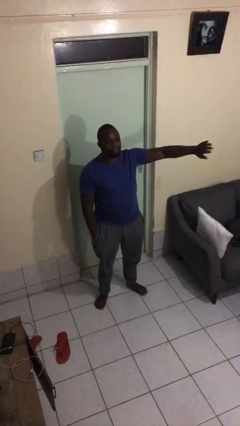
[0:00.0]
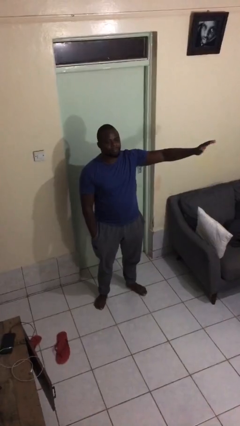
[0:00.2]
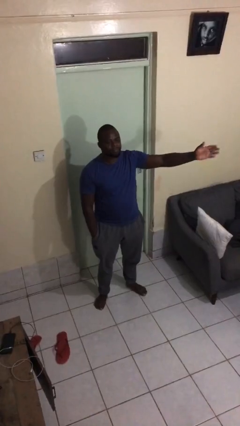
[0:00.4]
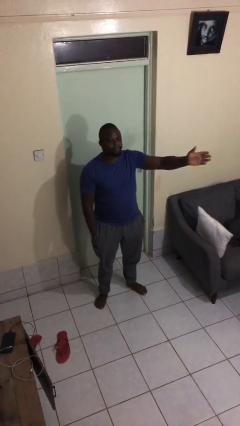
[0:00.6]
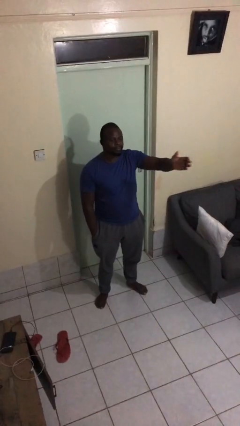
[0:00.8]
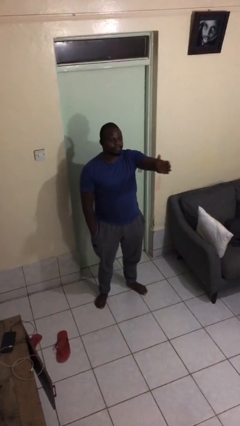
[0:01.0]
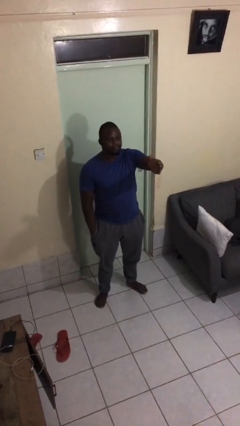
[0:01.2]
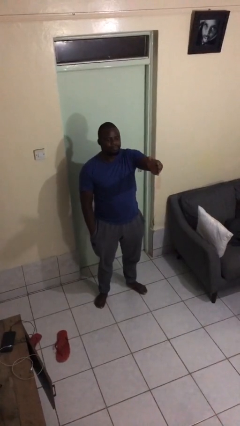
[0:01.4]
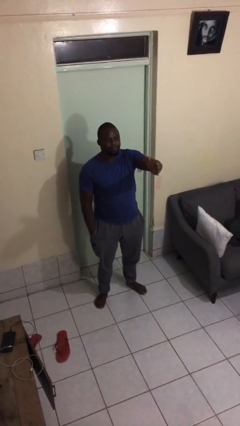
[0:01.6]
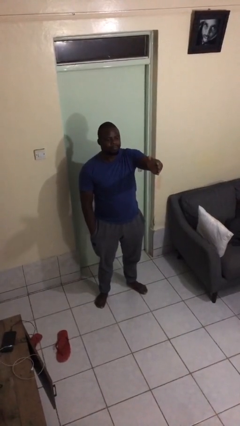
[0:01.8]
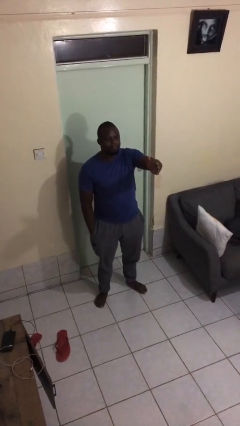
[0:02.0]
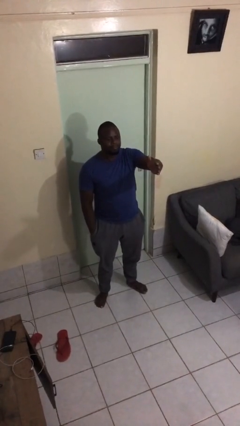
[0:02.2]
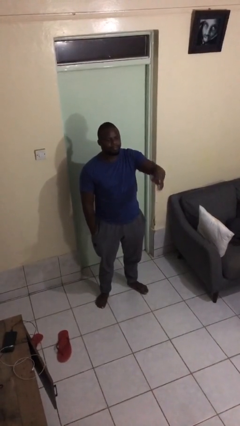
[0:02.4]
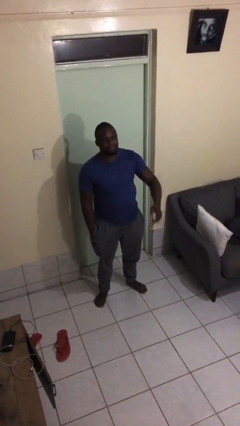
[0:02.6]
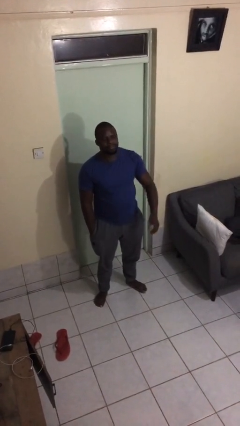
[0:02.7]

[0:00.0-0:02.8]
person gestures swipe right

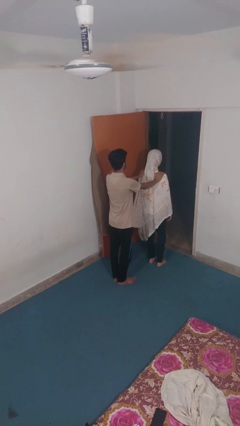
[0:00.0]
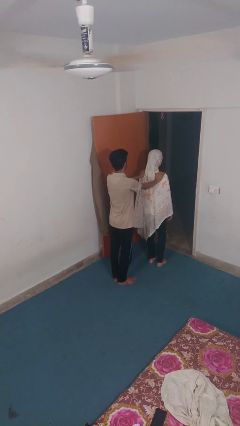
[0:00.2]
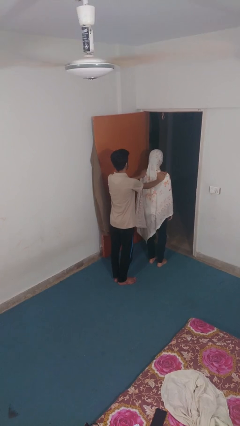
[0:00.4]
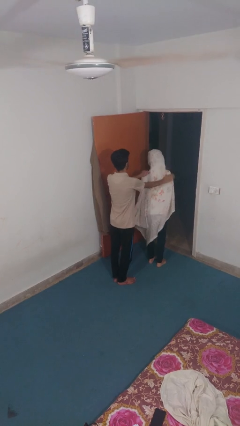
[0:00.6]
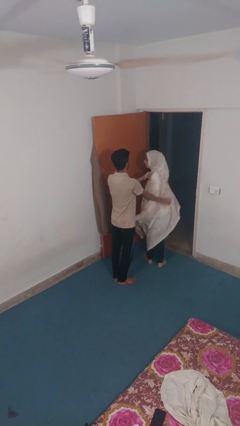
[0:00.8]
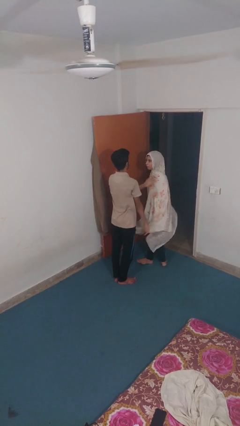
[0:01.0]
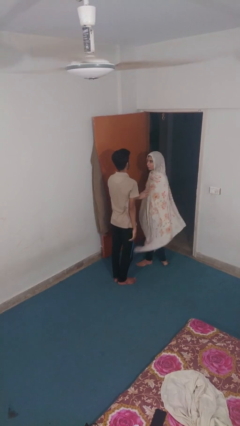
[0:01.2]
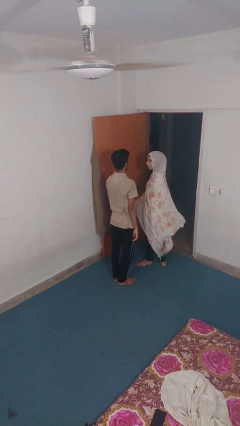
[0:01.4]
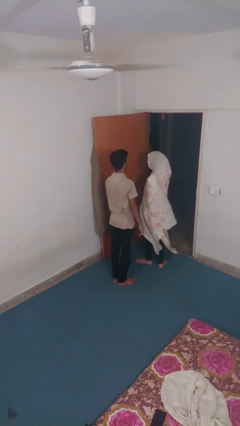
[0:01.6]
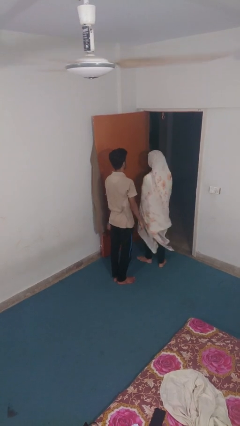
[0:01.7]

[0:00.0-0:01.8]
person spins person around

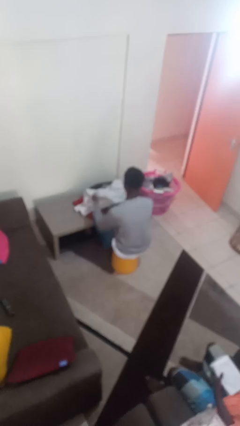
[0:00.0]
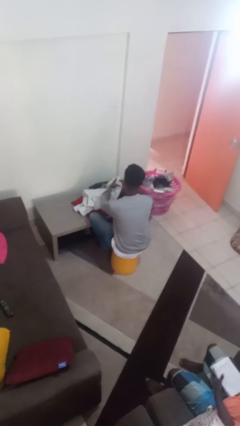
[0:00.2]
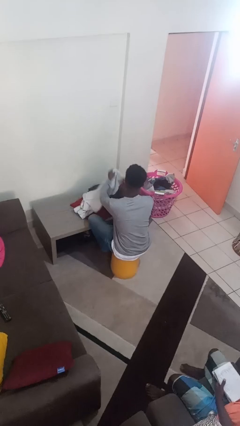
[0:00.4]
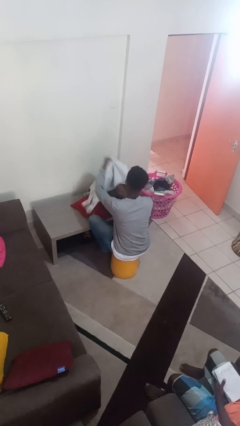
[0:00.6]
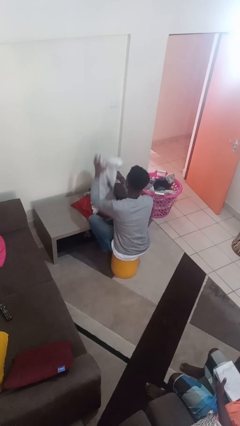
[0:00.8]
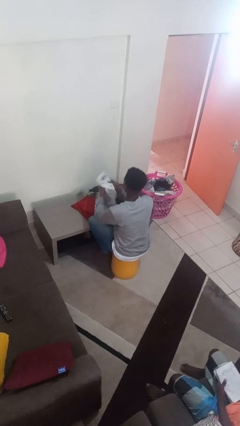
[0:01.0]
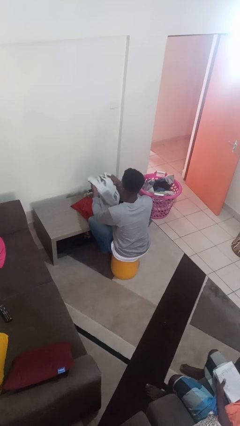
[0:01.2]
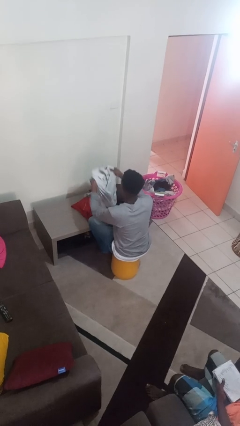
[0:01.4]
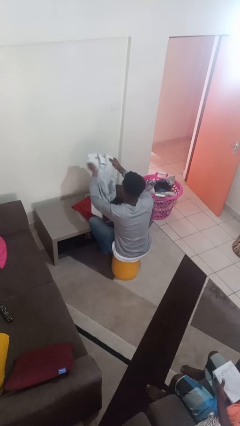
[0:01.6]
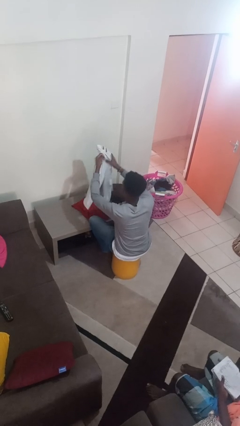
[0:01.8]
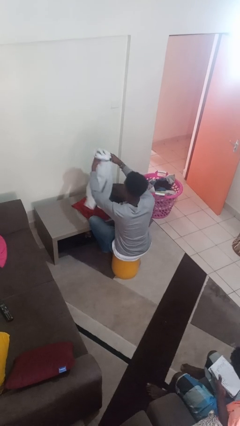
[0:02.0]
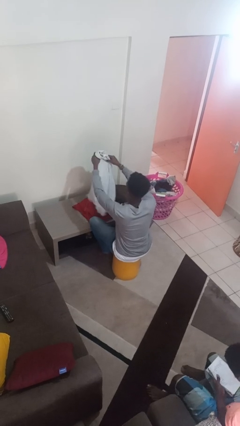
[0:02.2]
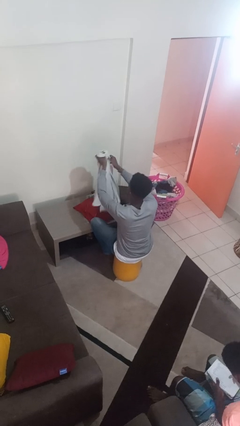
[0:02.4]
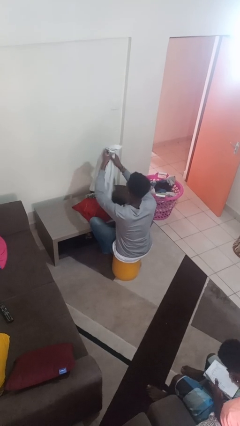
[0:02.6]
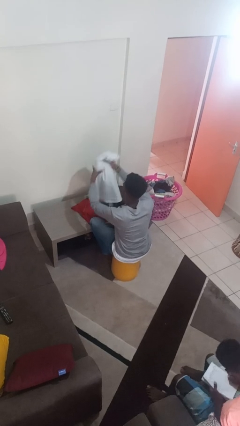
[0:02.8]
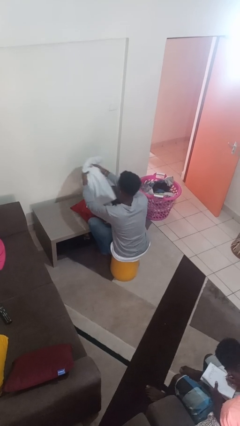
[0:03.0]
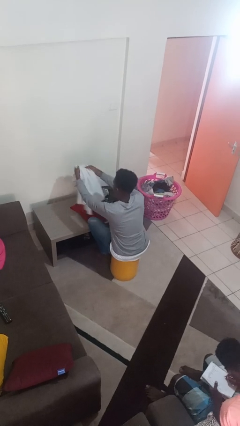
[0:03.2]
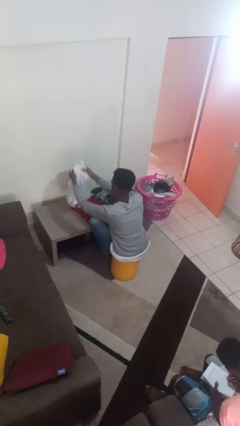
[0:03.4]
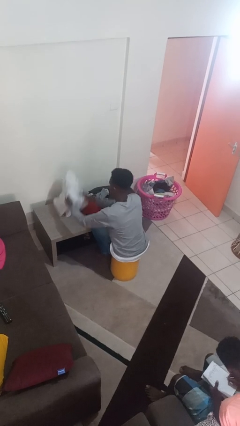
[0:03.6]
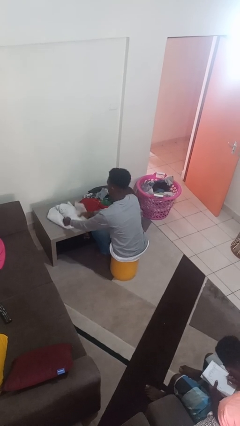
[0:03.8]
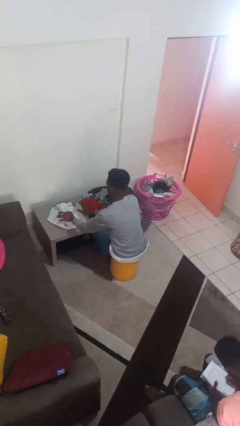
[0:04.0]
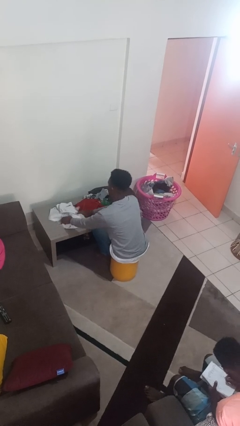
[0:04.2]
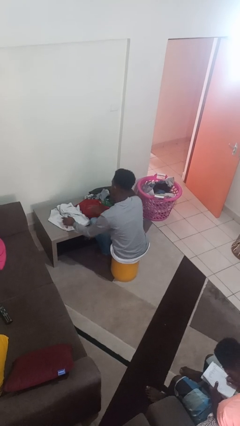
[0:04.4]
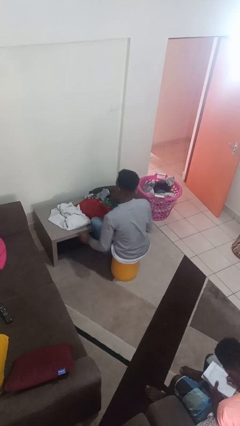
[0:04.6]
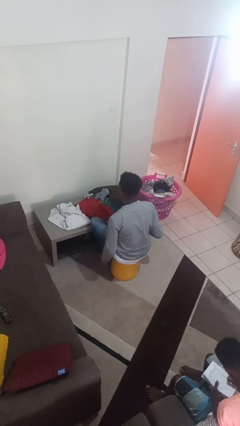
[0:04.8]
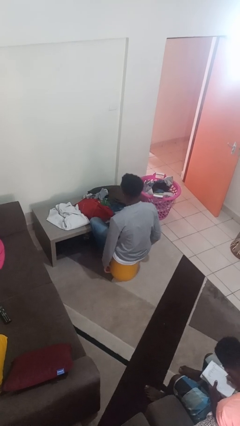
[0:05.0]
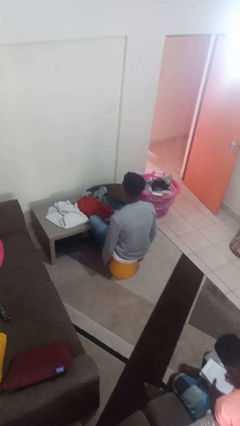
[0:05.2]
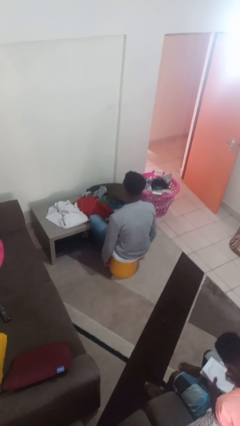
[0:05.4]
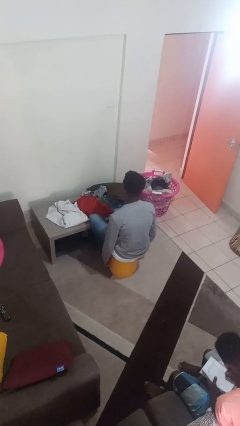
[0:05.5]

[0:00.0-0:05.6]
person folds shirt

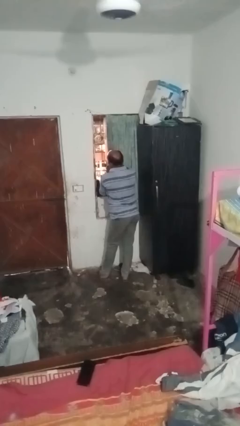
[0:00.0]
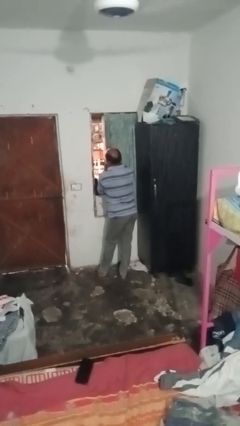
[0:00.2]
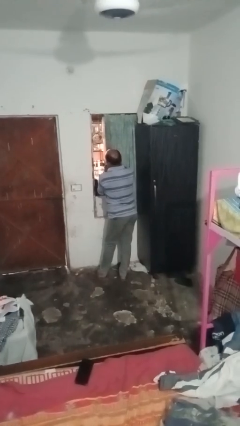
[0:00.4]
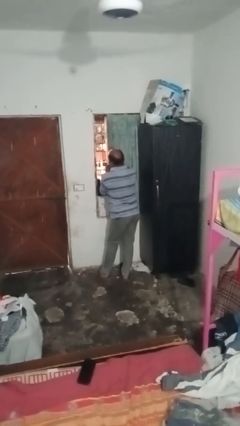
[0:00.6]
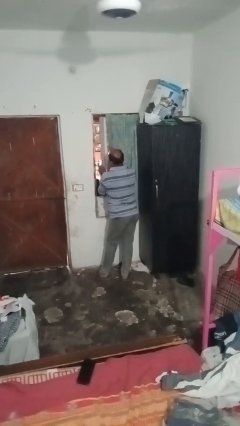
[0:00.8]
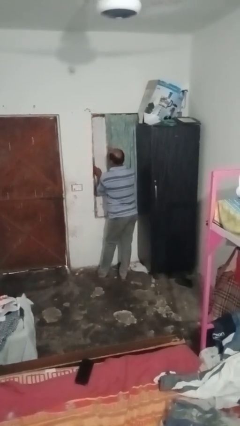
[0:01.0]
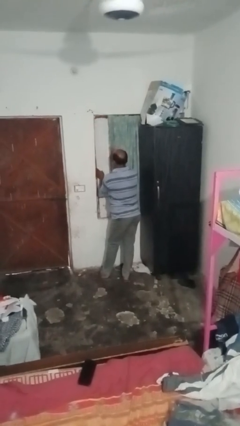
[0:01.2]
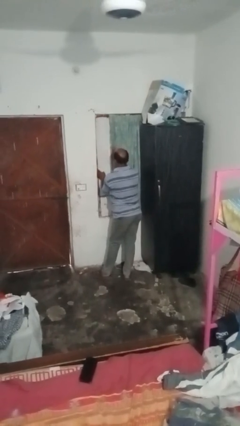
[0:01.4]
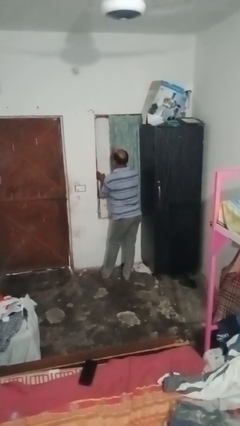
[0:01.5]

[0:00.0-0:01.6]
person closes home window

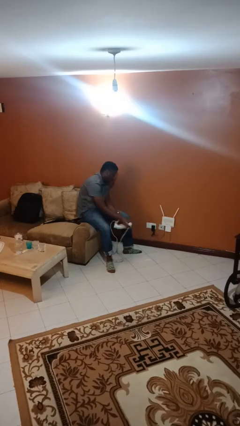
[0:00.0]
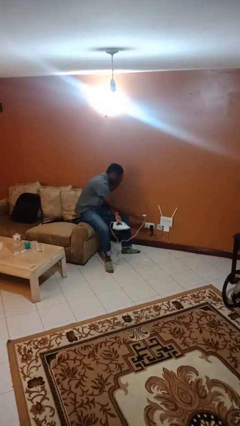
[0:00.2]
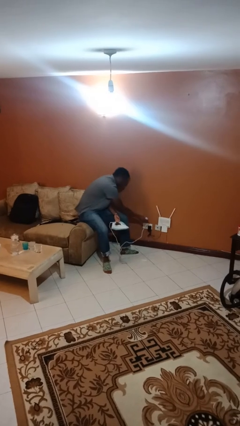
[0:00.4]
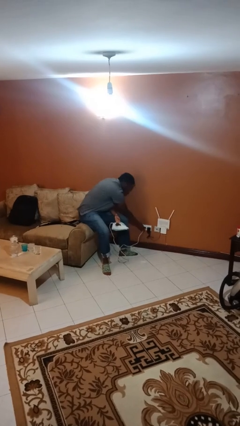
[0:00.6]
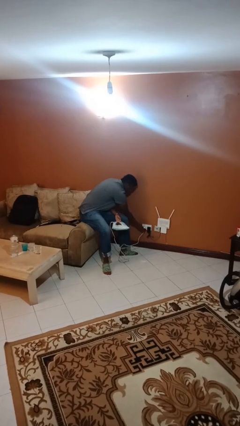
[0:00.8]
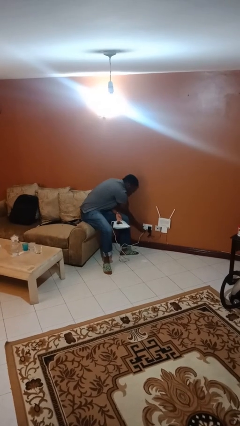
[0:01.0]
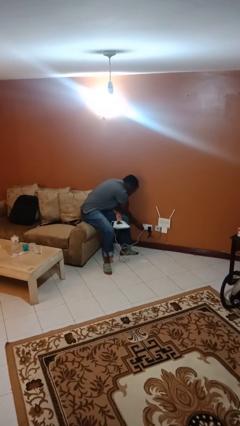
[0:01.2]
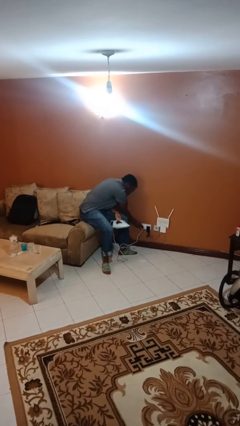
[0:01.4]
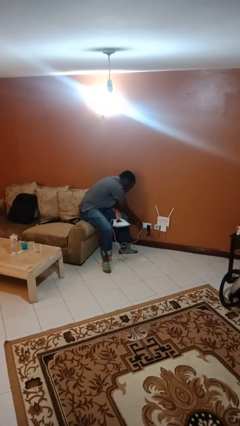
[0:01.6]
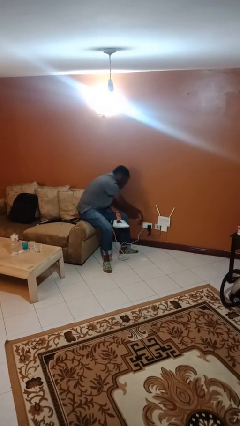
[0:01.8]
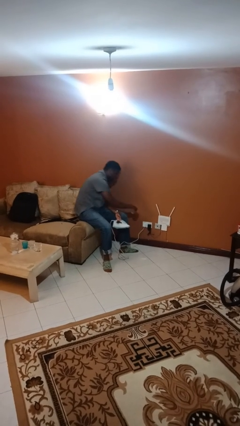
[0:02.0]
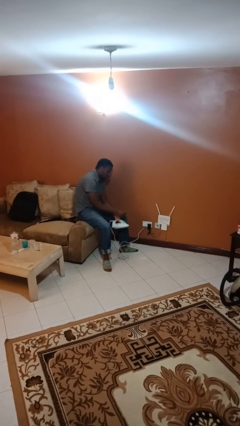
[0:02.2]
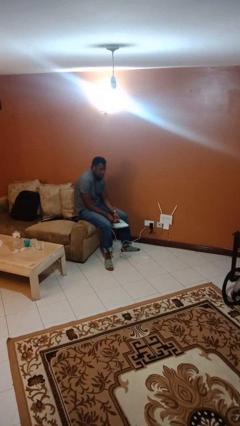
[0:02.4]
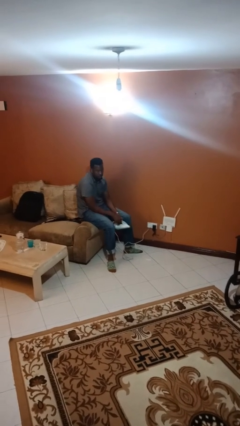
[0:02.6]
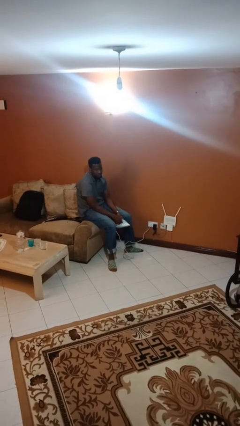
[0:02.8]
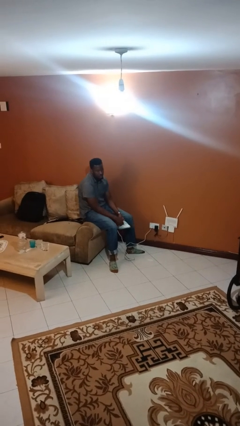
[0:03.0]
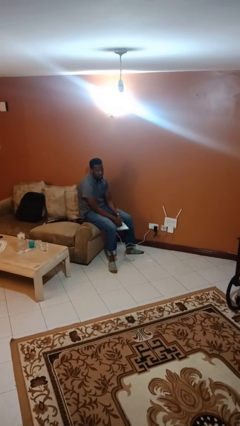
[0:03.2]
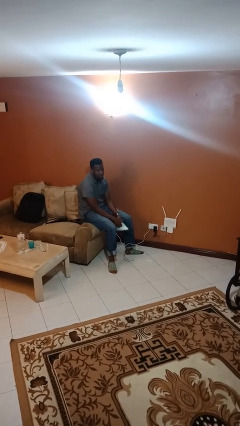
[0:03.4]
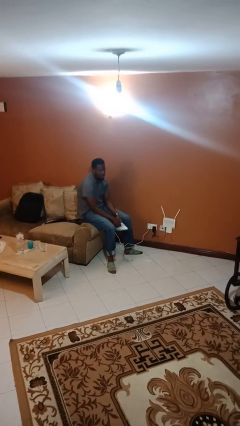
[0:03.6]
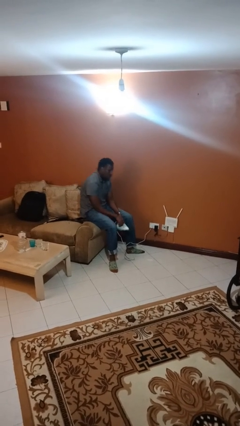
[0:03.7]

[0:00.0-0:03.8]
person plugs into electrical socket

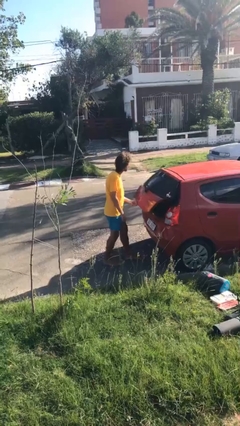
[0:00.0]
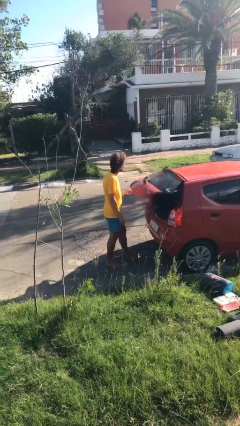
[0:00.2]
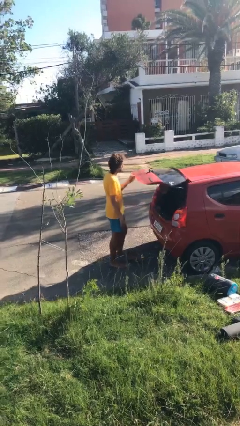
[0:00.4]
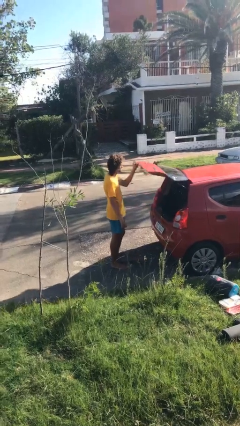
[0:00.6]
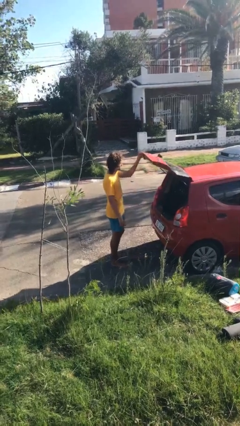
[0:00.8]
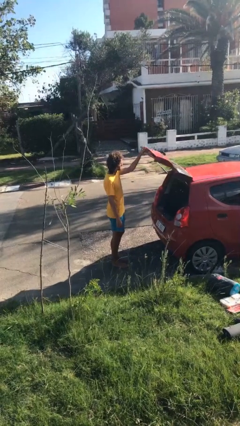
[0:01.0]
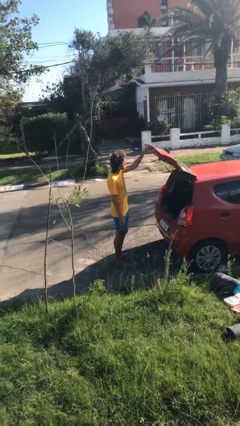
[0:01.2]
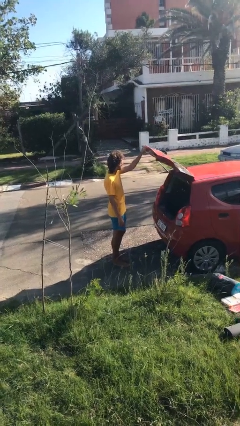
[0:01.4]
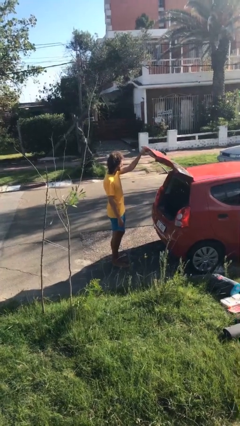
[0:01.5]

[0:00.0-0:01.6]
person opens car trunk

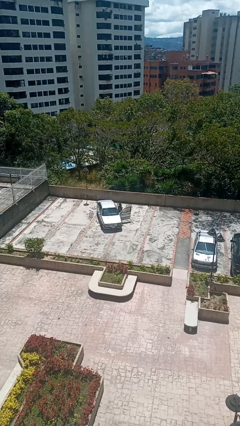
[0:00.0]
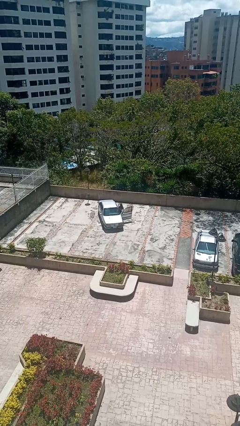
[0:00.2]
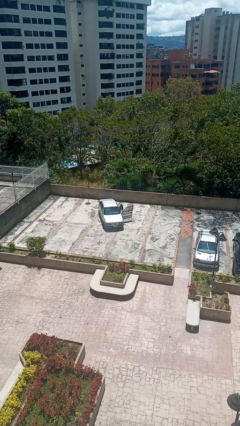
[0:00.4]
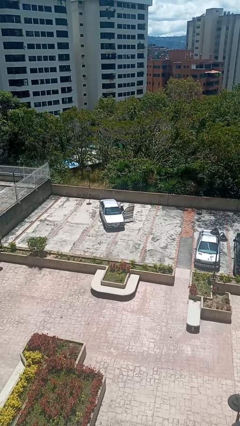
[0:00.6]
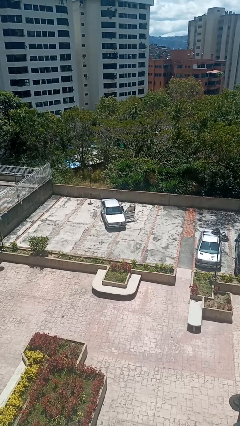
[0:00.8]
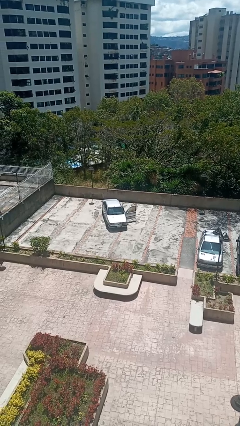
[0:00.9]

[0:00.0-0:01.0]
person enters car
